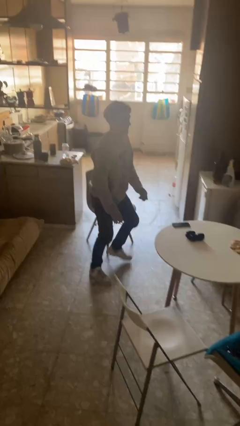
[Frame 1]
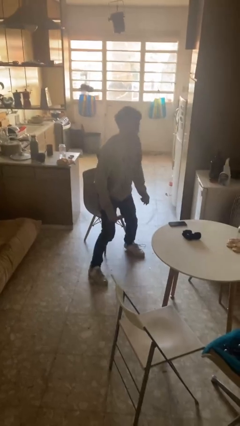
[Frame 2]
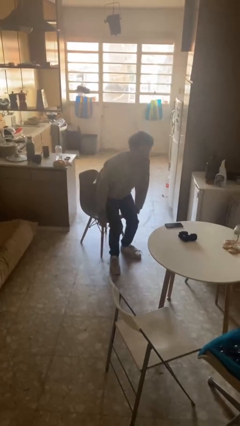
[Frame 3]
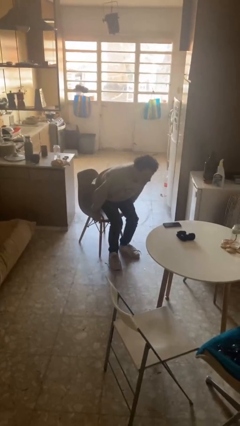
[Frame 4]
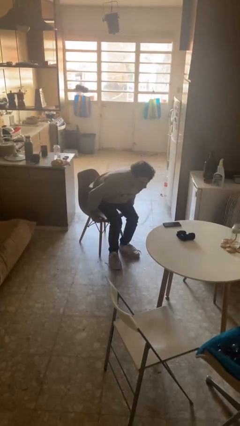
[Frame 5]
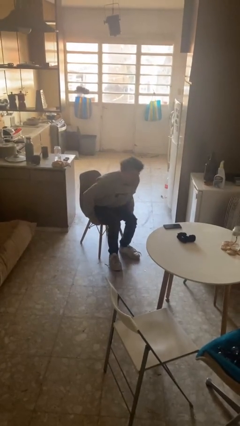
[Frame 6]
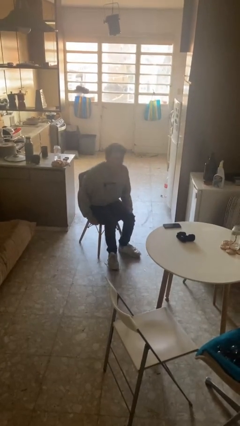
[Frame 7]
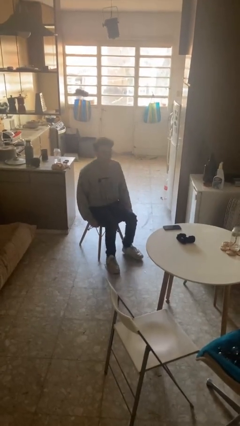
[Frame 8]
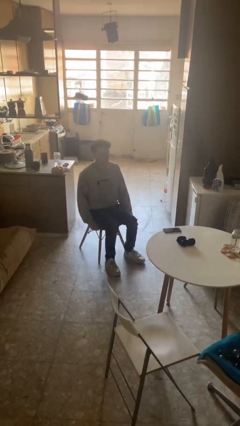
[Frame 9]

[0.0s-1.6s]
person sits down

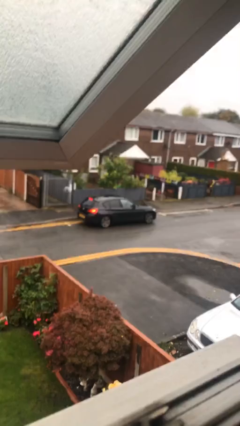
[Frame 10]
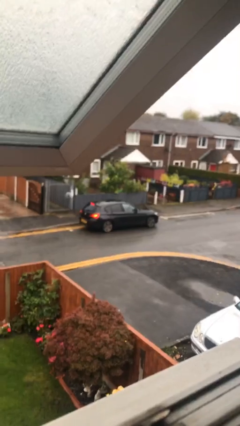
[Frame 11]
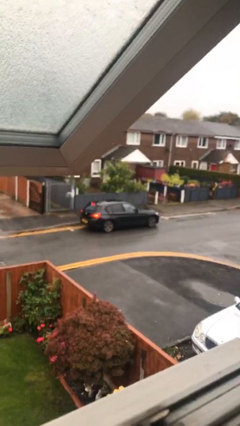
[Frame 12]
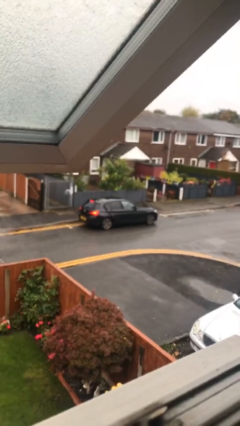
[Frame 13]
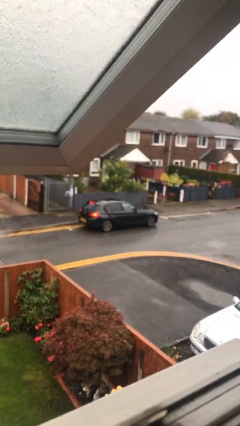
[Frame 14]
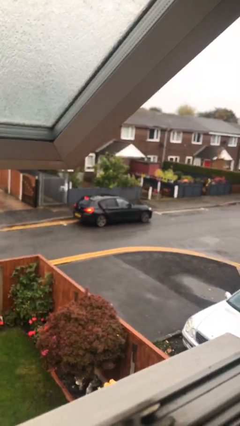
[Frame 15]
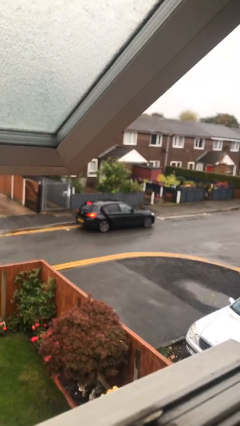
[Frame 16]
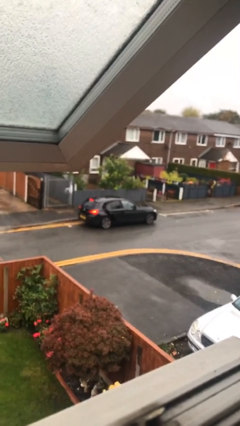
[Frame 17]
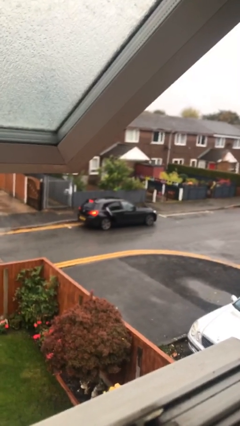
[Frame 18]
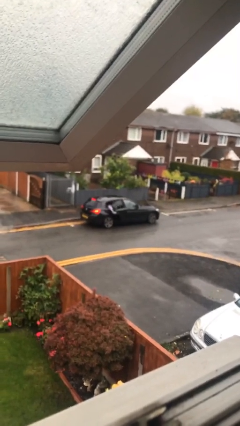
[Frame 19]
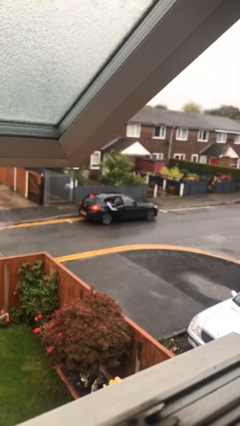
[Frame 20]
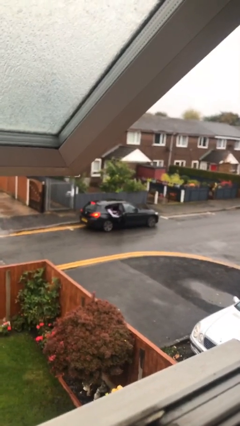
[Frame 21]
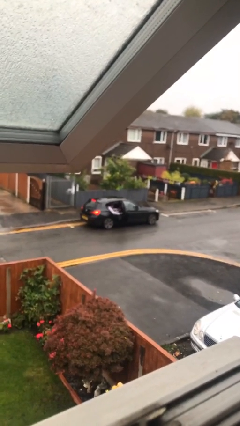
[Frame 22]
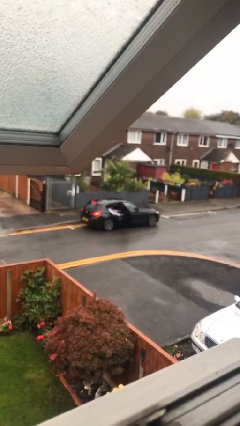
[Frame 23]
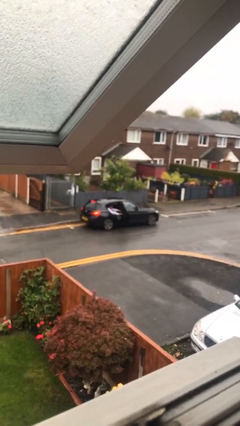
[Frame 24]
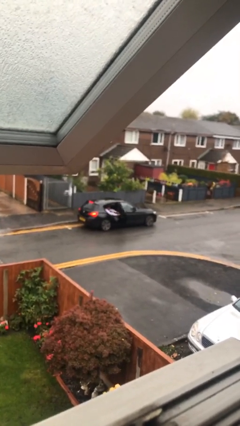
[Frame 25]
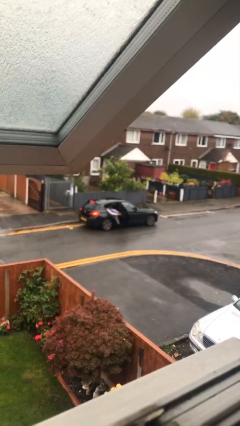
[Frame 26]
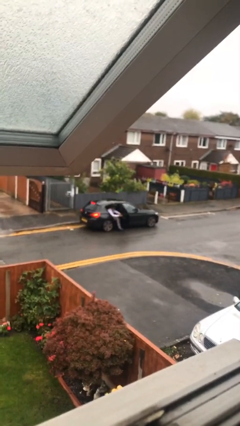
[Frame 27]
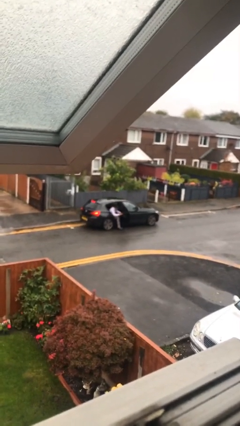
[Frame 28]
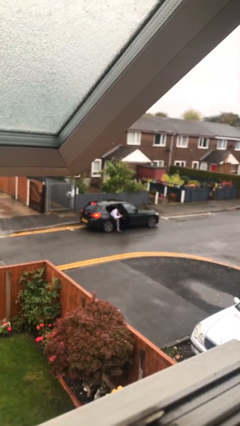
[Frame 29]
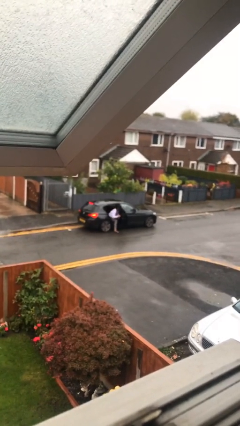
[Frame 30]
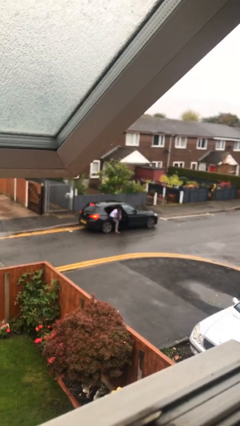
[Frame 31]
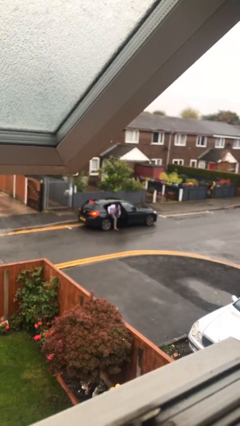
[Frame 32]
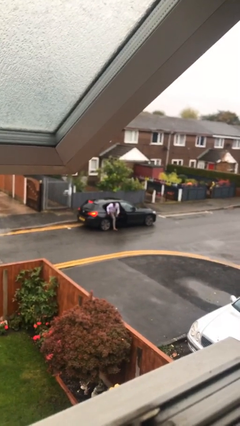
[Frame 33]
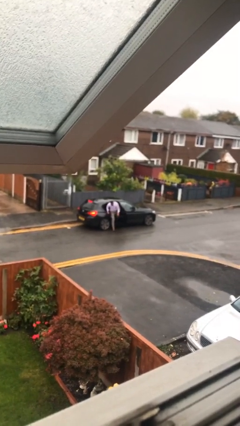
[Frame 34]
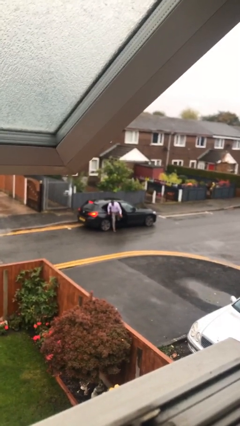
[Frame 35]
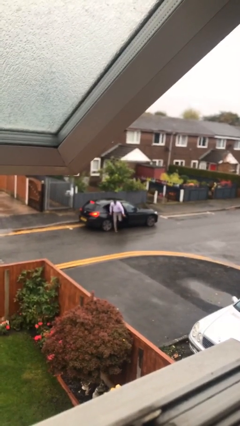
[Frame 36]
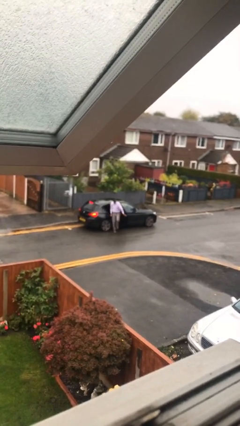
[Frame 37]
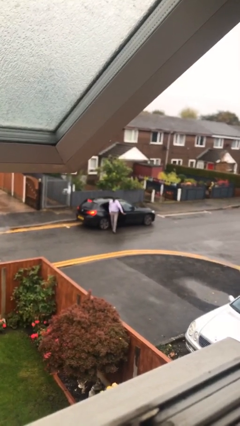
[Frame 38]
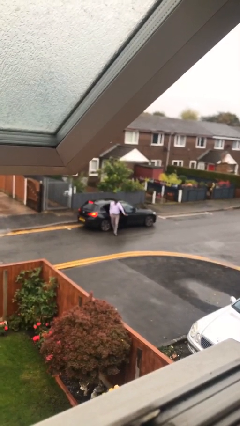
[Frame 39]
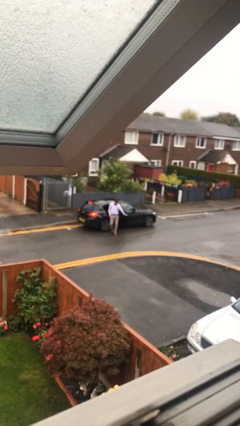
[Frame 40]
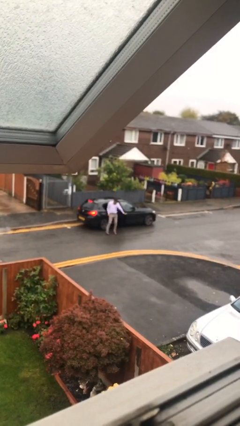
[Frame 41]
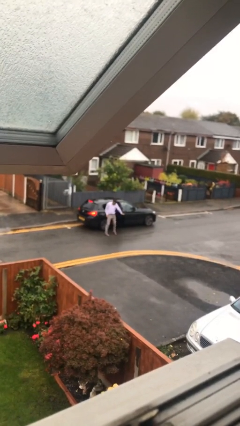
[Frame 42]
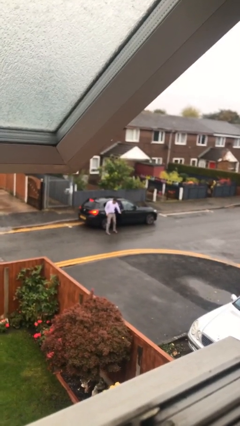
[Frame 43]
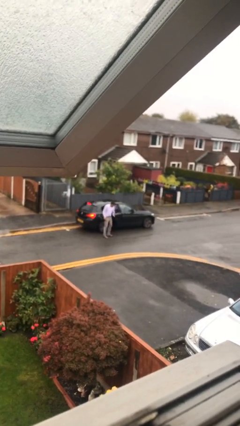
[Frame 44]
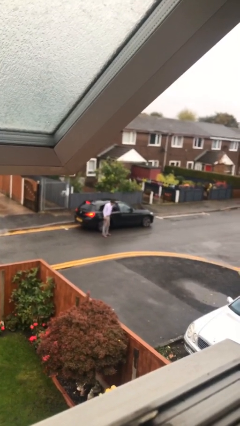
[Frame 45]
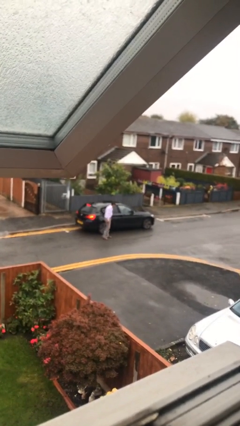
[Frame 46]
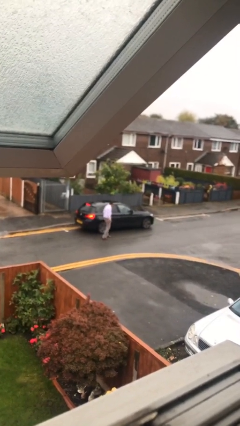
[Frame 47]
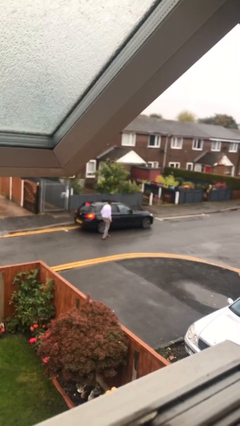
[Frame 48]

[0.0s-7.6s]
car drops off person

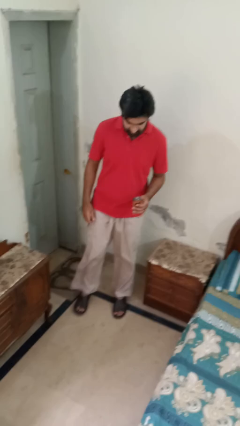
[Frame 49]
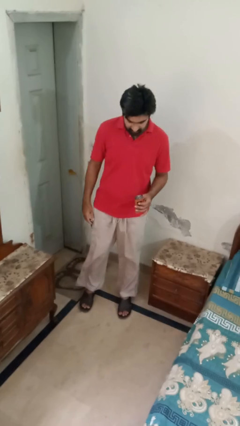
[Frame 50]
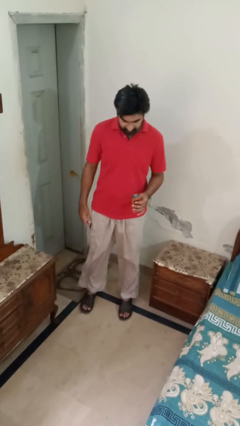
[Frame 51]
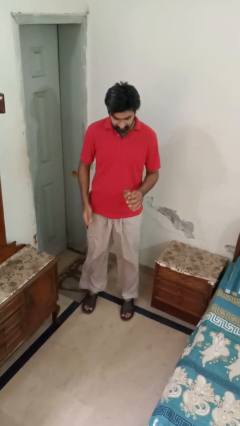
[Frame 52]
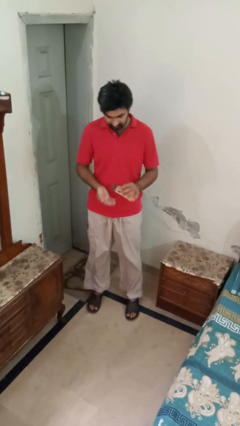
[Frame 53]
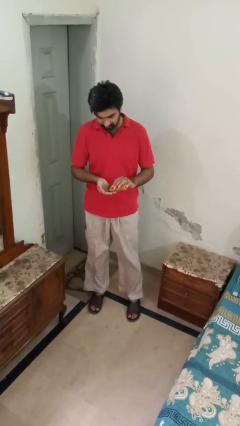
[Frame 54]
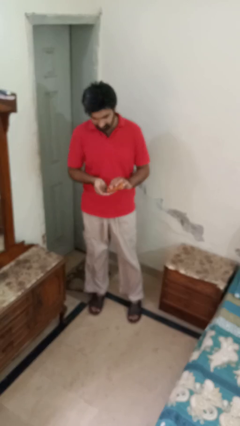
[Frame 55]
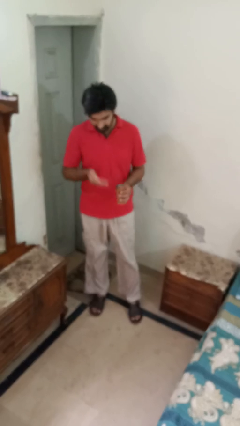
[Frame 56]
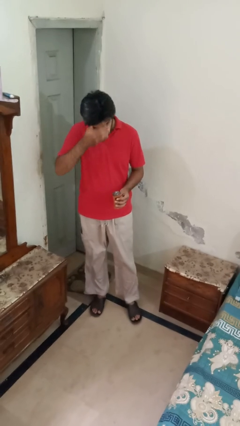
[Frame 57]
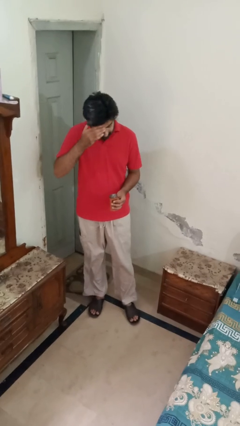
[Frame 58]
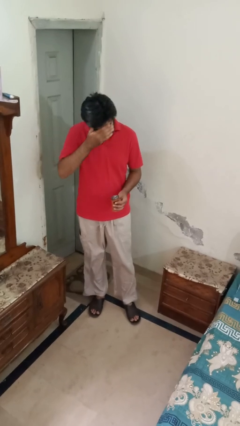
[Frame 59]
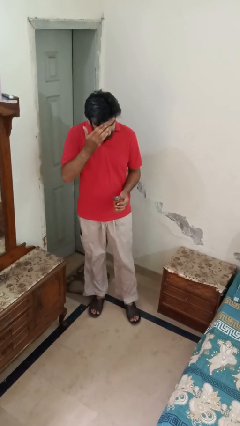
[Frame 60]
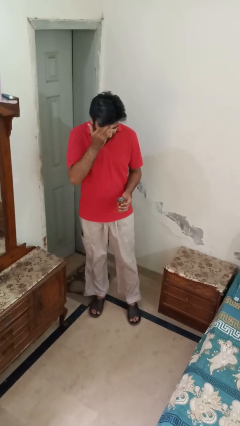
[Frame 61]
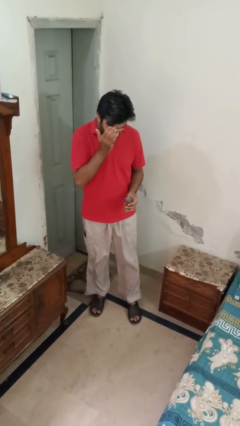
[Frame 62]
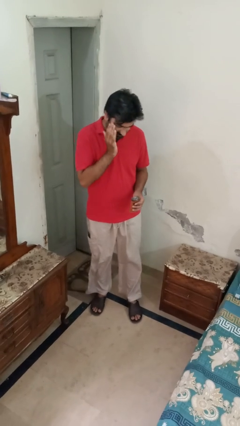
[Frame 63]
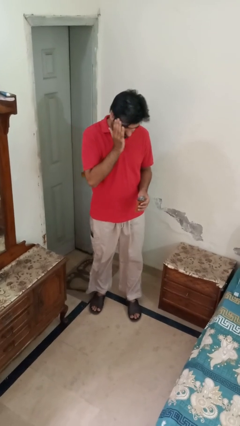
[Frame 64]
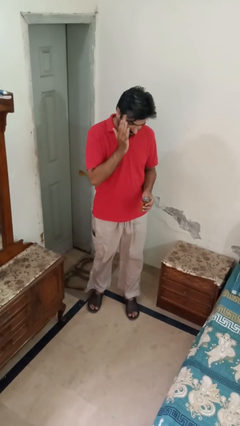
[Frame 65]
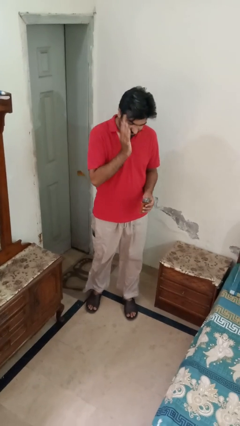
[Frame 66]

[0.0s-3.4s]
person applies sunscreen

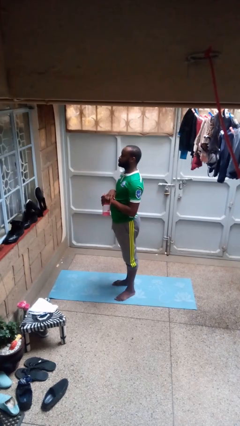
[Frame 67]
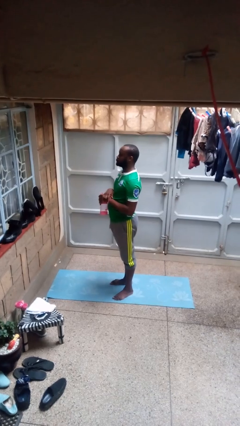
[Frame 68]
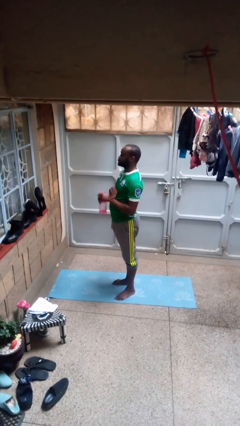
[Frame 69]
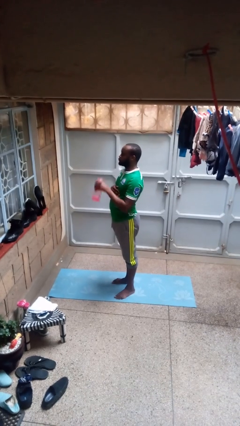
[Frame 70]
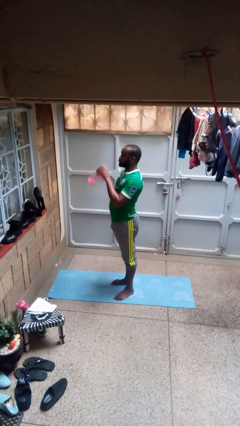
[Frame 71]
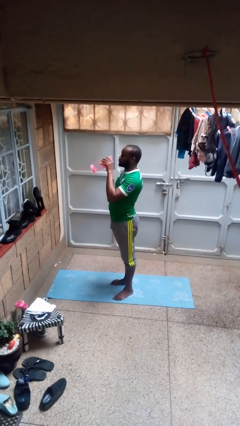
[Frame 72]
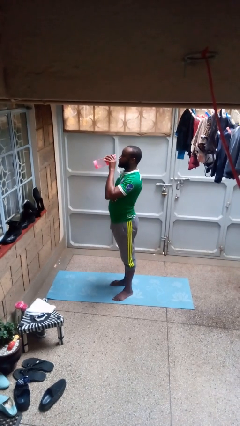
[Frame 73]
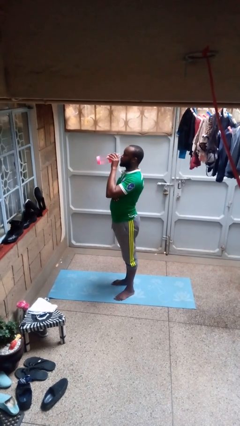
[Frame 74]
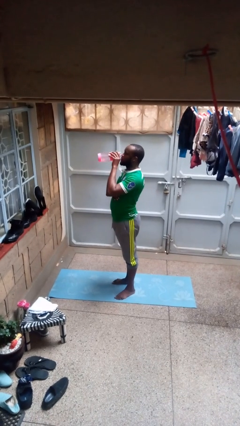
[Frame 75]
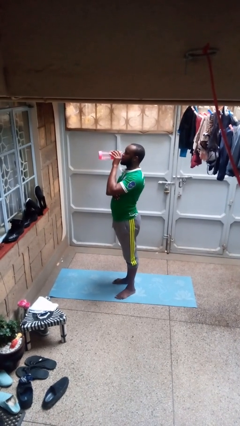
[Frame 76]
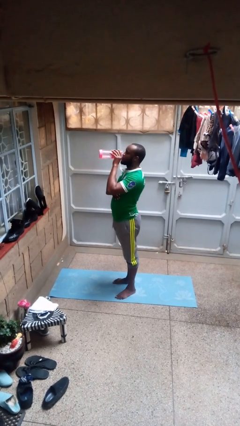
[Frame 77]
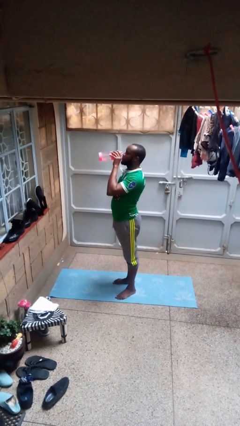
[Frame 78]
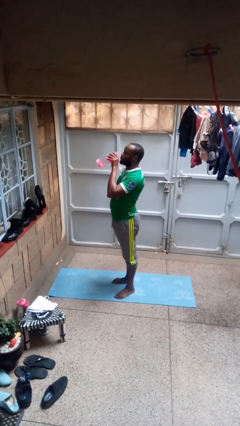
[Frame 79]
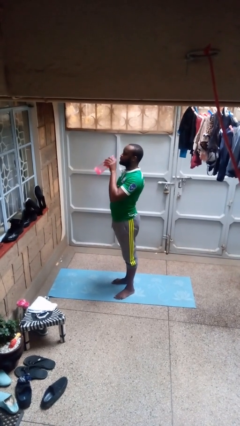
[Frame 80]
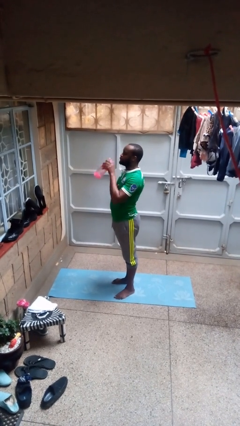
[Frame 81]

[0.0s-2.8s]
person drinks from bottle

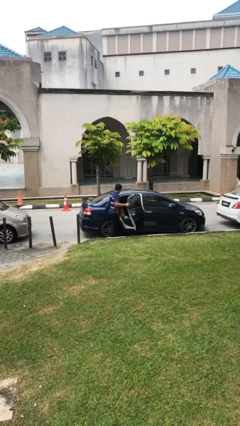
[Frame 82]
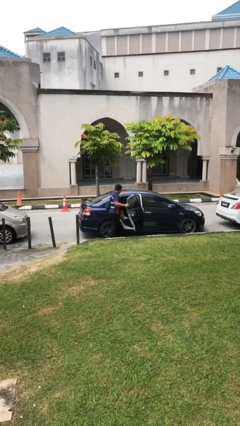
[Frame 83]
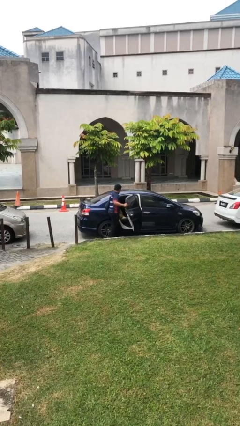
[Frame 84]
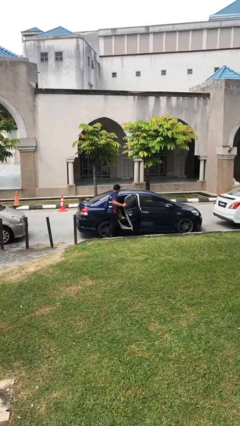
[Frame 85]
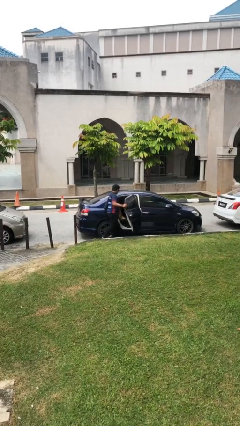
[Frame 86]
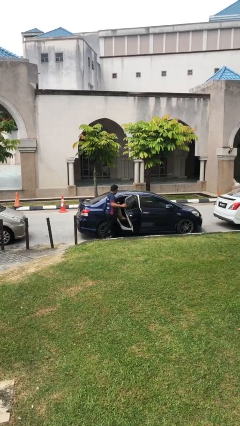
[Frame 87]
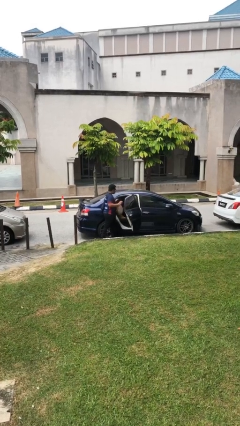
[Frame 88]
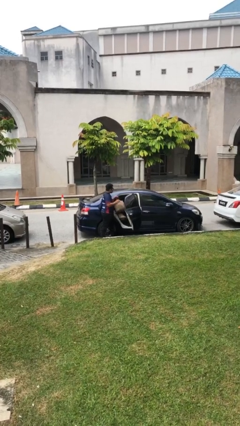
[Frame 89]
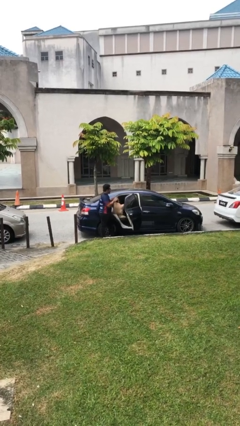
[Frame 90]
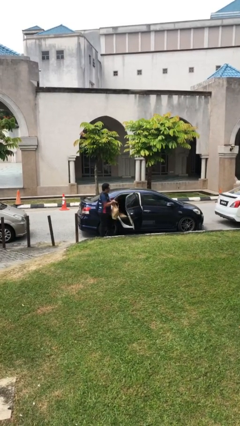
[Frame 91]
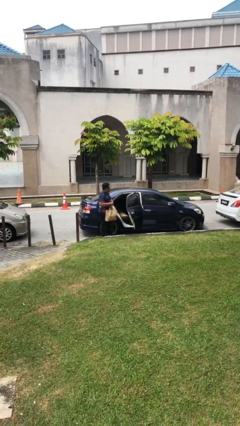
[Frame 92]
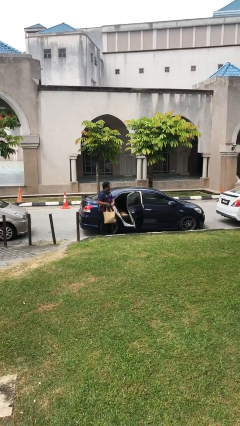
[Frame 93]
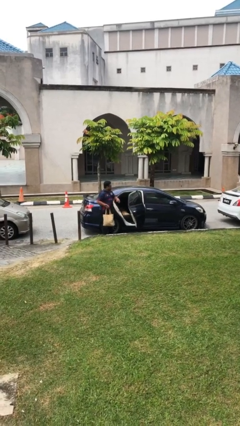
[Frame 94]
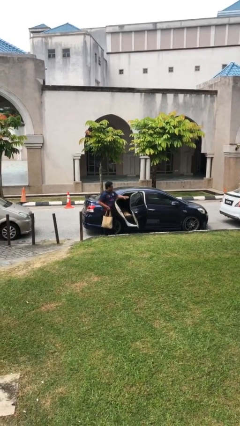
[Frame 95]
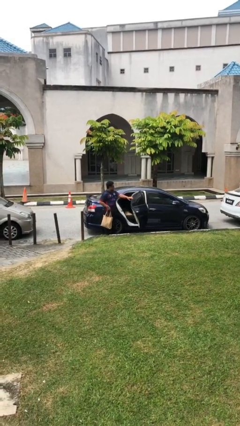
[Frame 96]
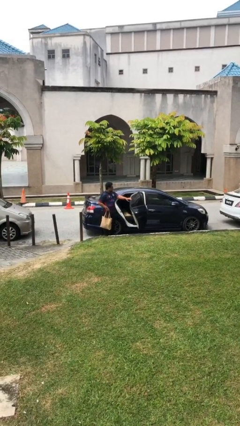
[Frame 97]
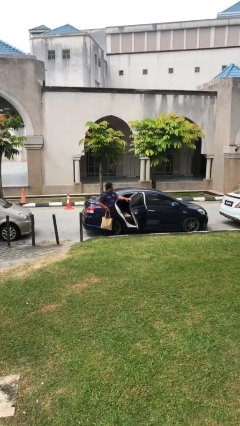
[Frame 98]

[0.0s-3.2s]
person unloads car
